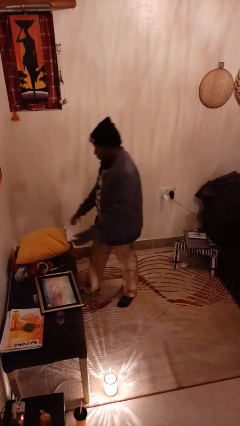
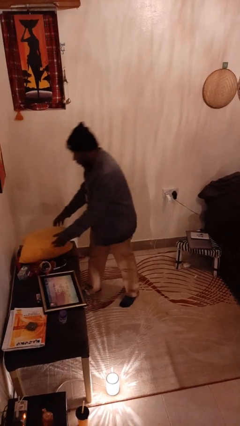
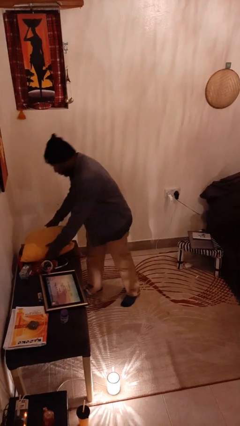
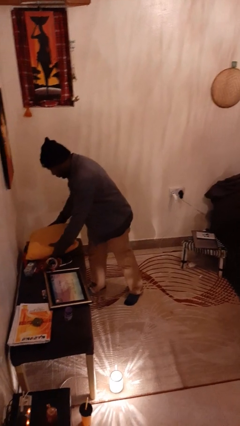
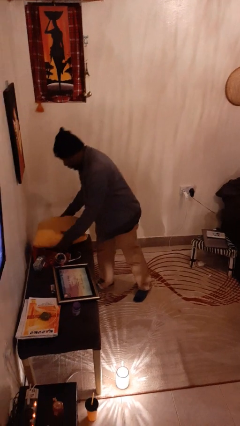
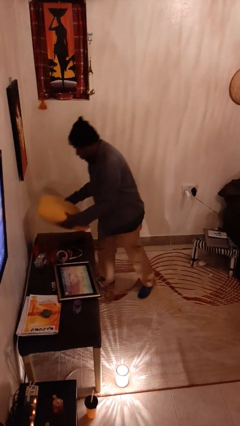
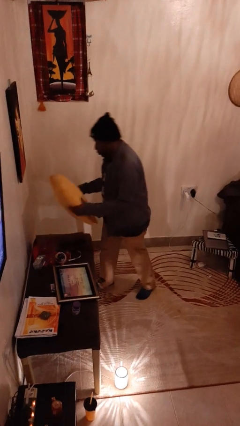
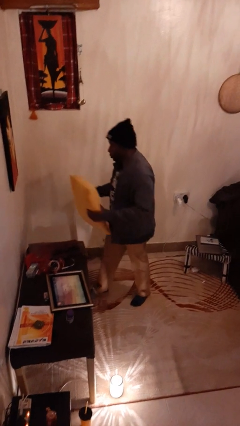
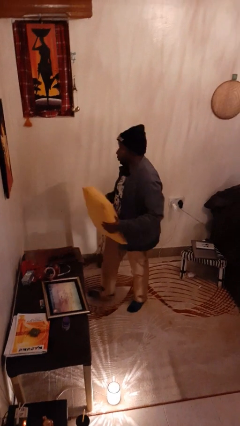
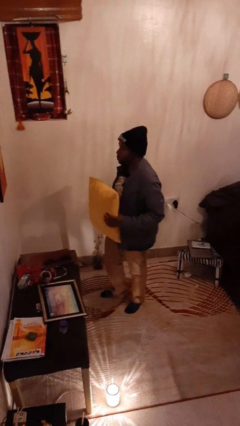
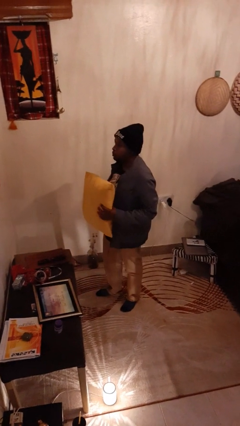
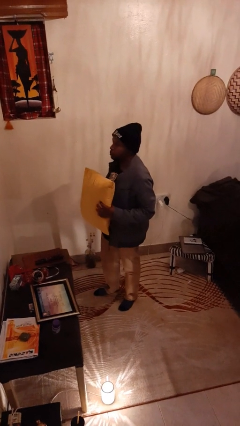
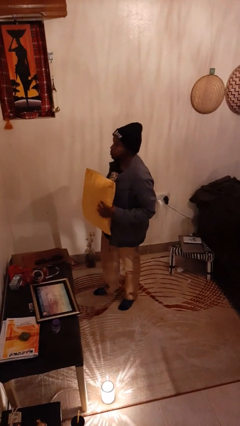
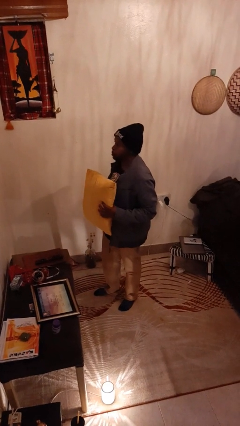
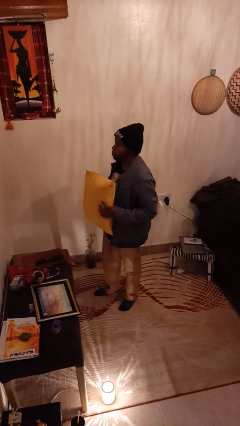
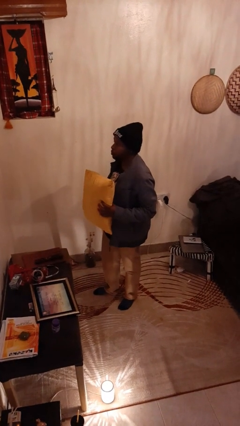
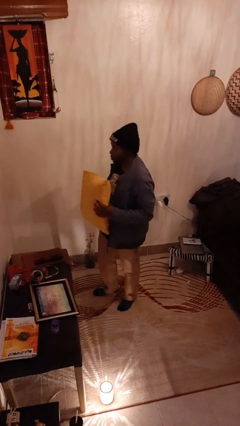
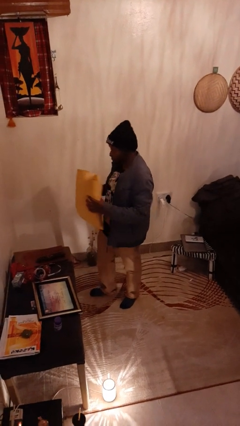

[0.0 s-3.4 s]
person picks up object from countertop

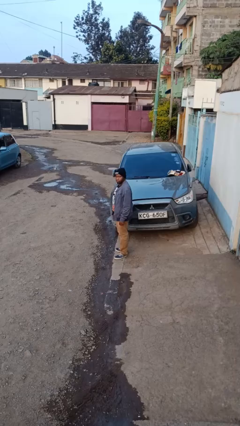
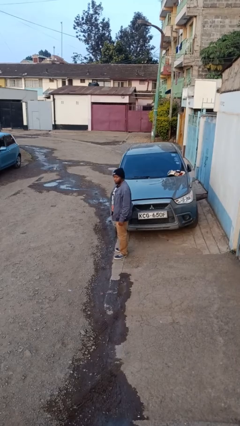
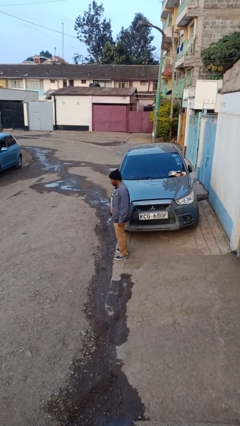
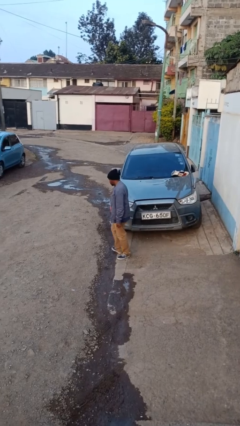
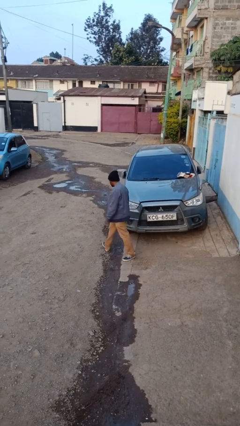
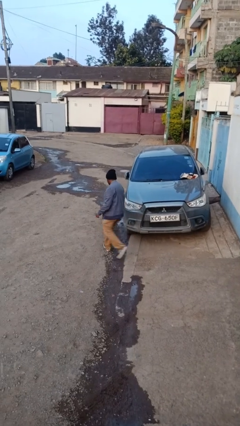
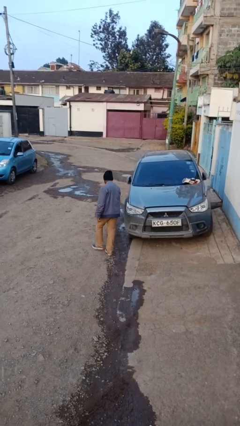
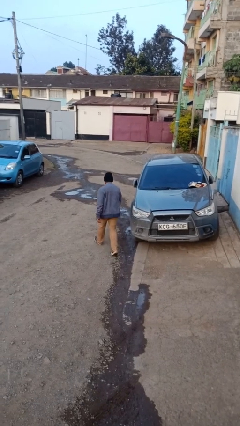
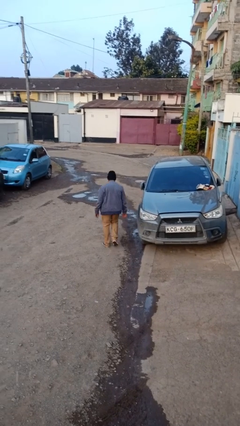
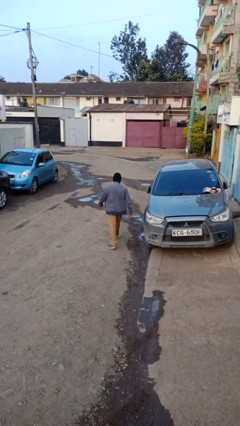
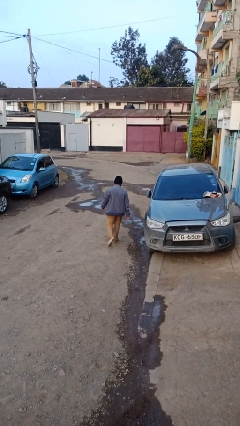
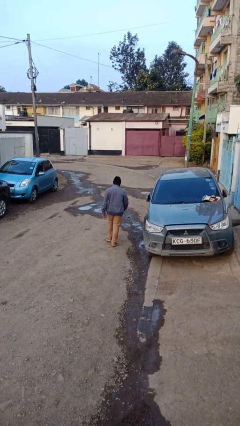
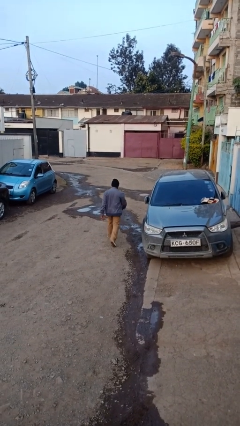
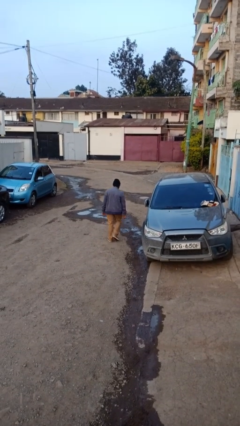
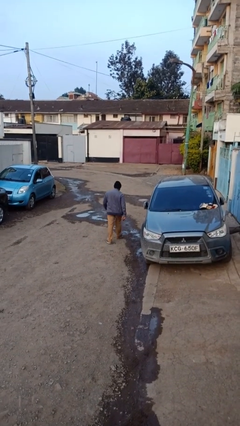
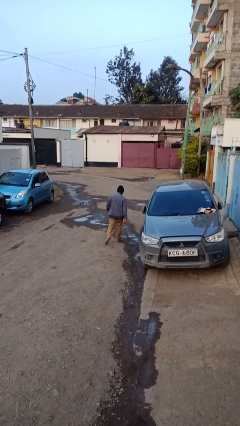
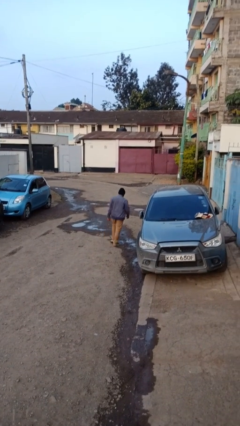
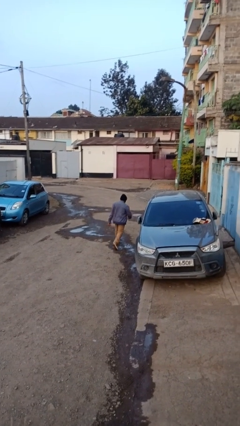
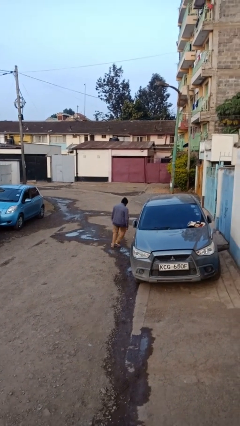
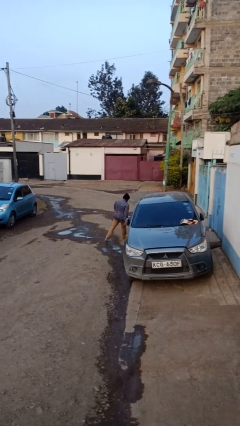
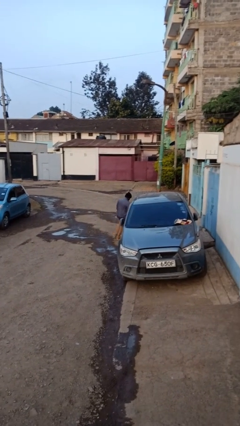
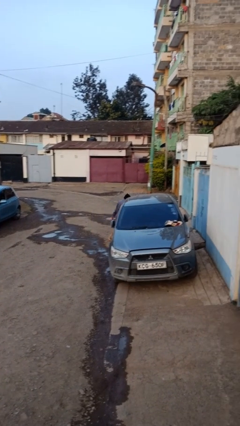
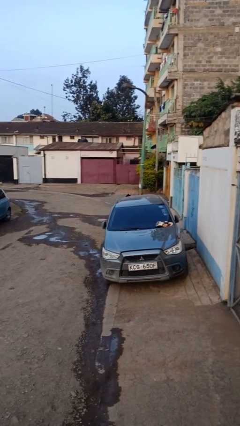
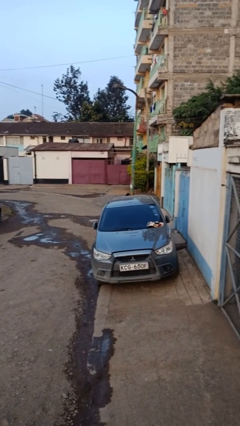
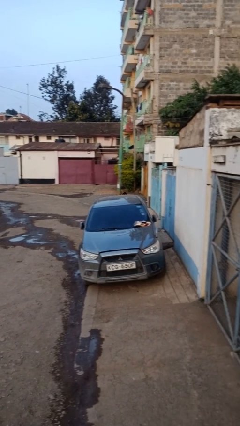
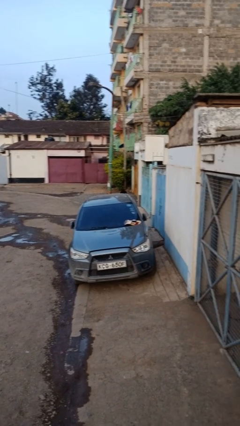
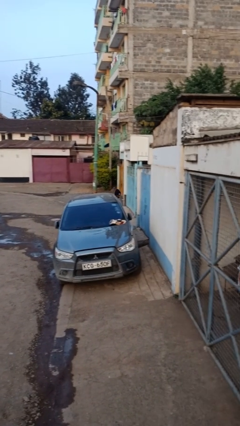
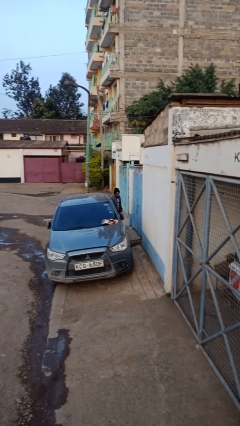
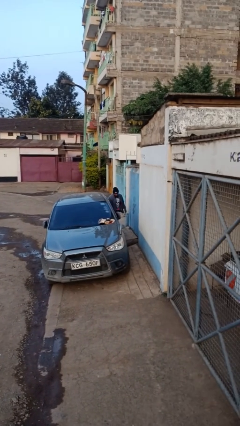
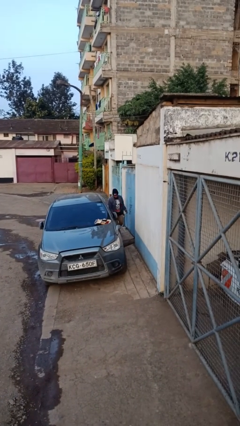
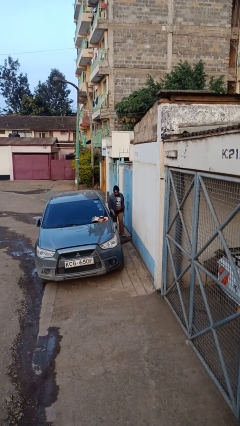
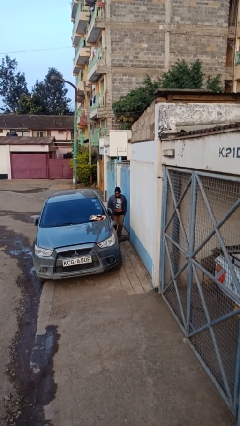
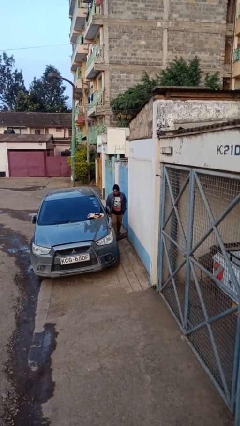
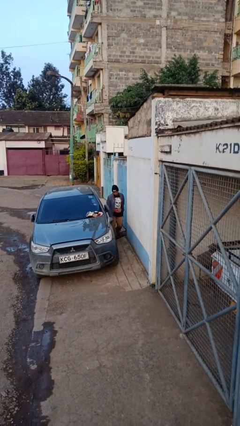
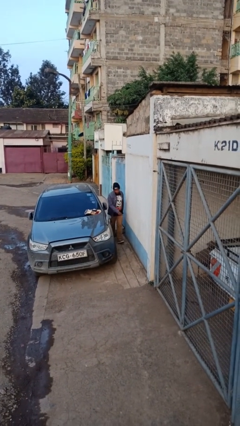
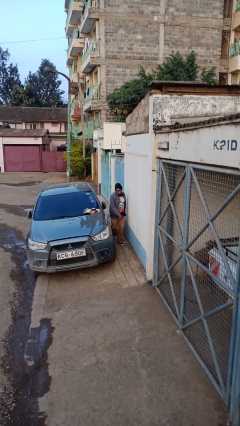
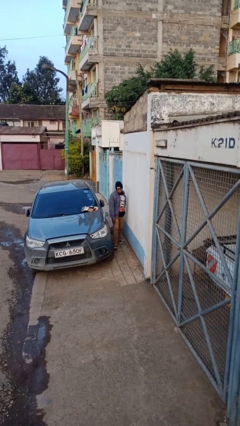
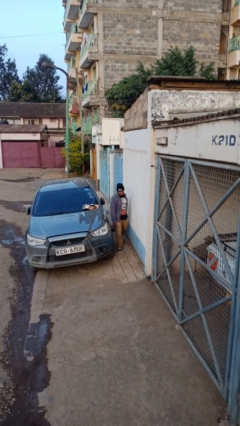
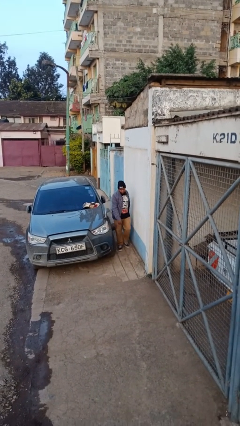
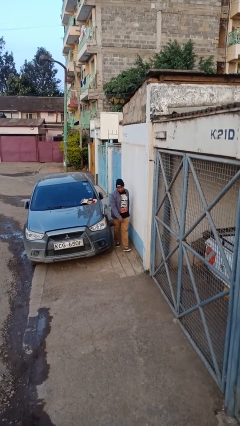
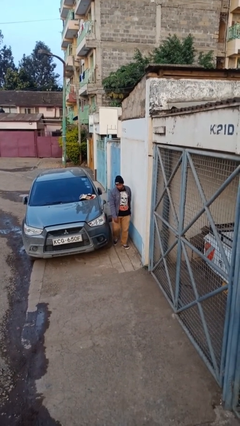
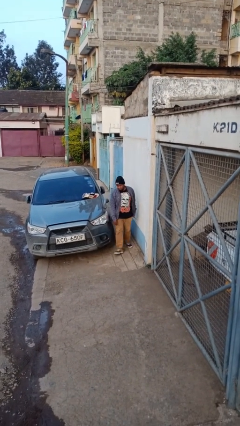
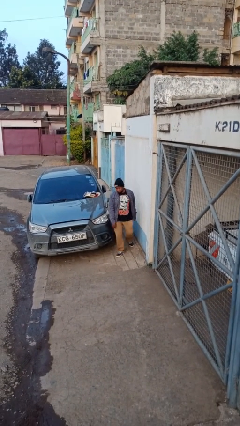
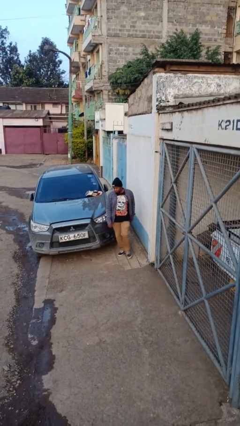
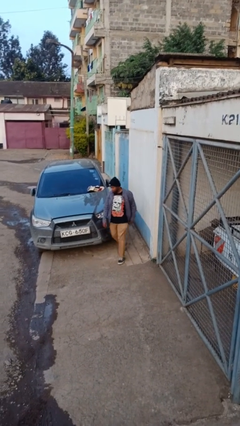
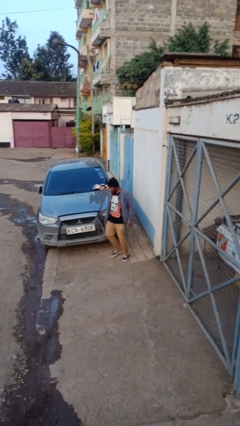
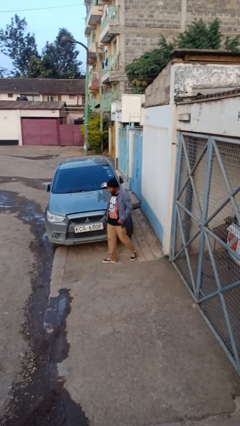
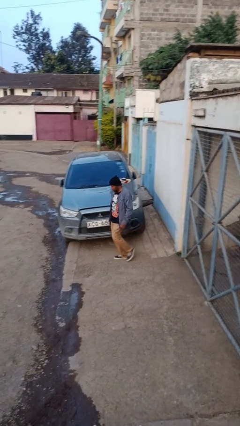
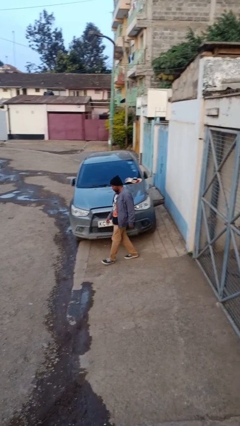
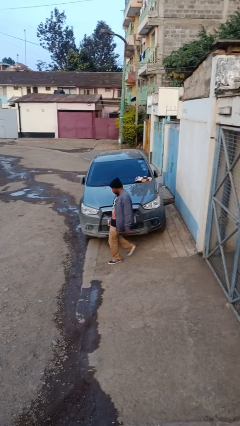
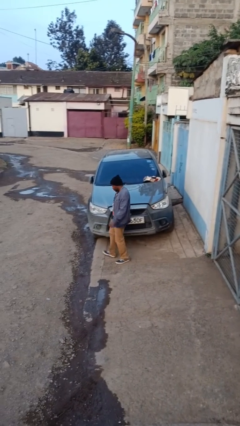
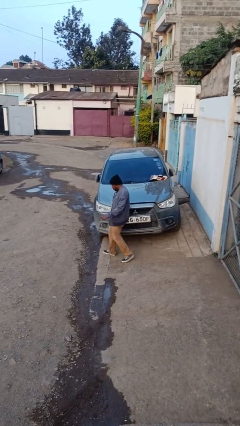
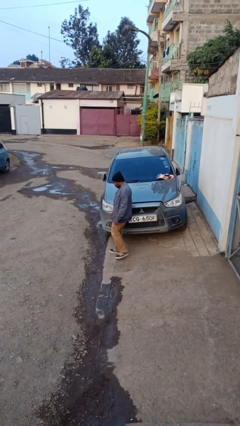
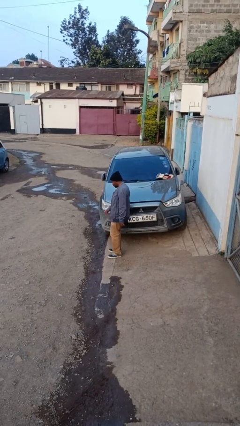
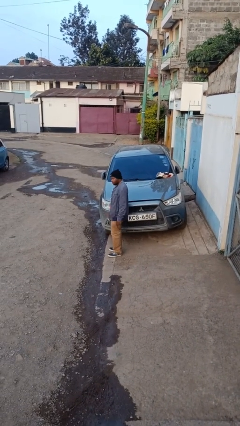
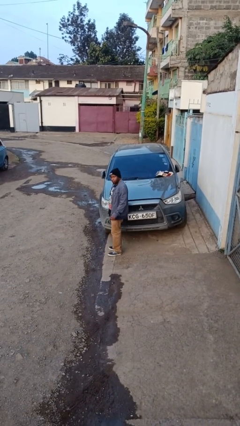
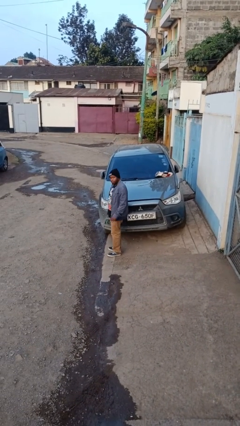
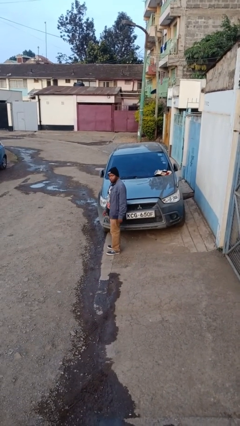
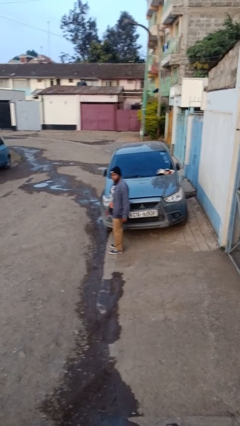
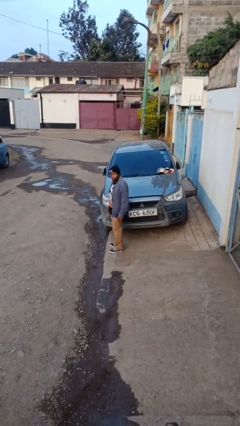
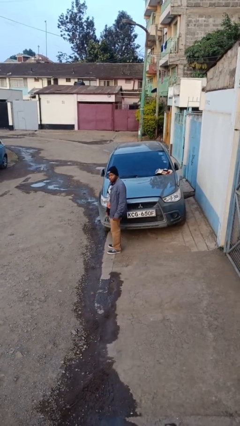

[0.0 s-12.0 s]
person walks around car

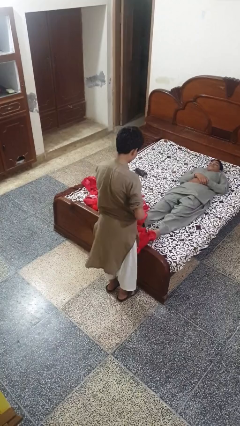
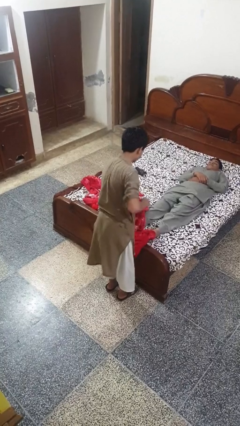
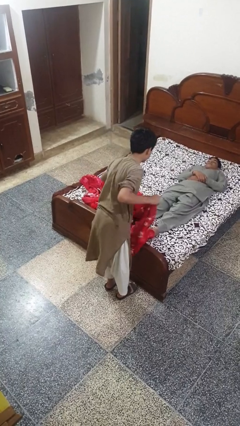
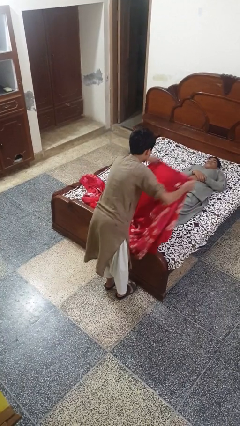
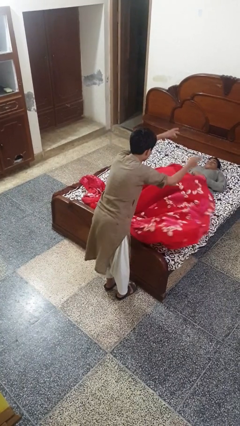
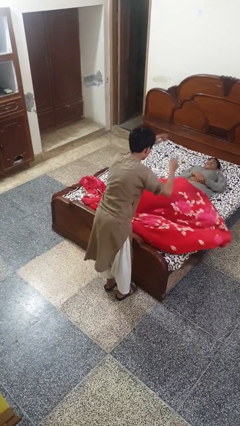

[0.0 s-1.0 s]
person covers friend with blanket

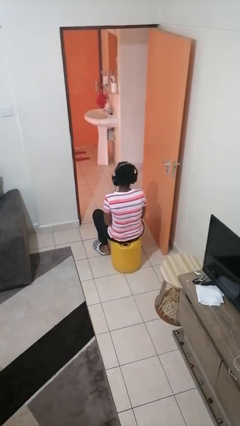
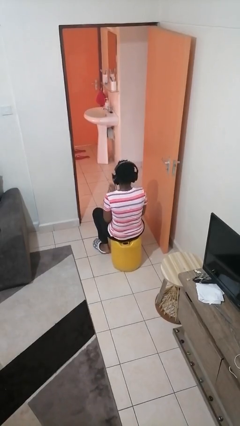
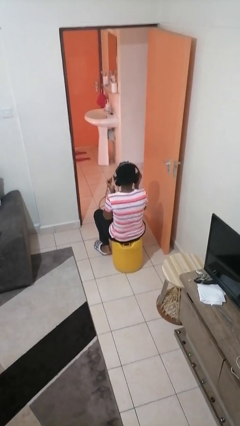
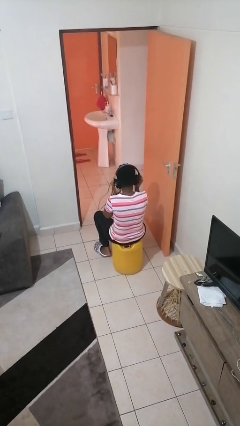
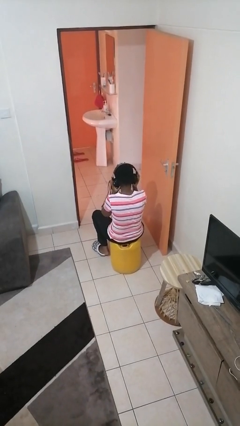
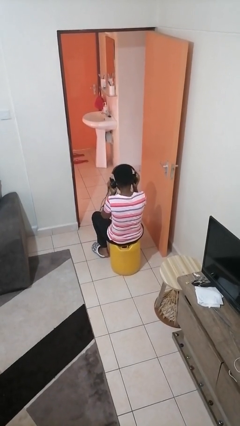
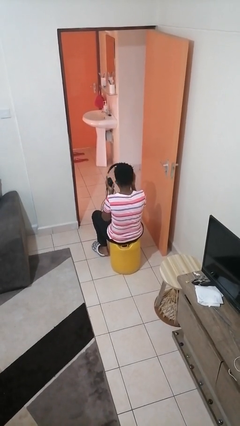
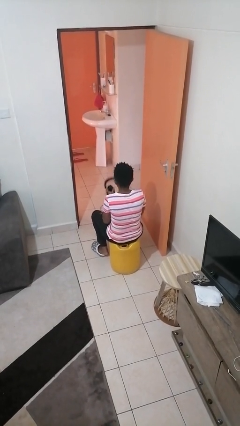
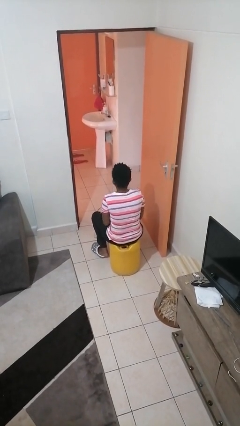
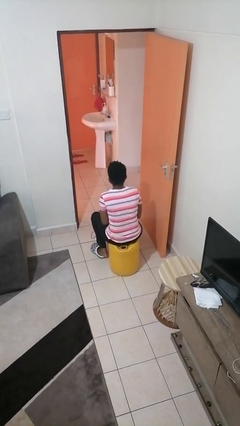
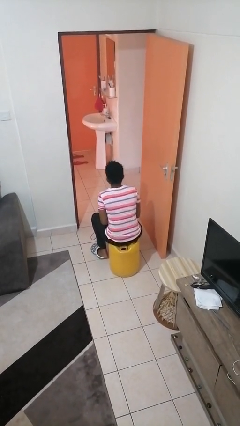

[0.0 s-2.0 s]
person takes off headphones
